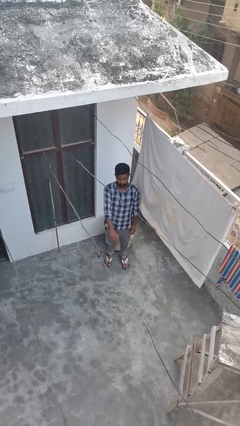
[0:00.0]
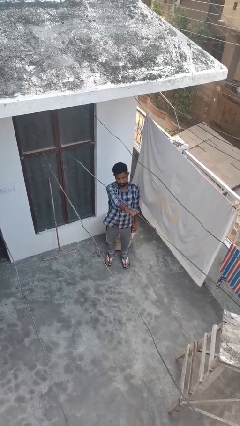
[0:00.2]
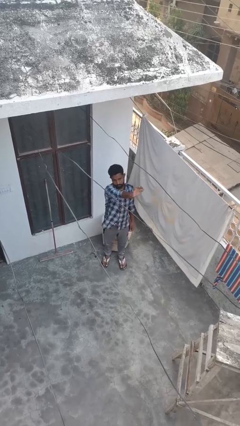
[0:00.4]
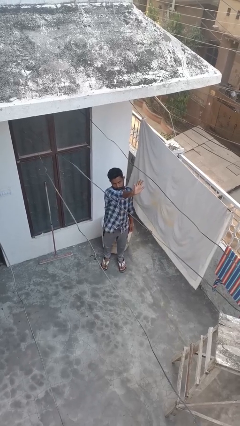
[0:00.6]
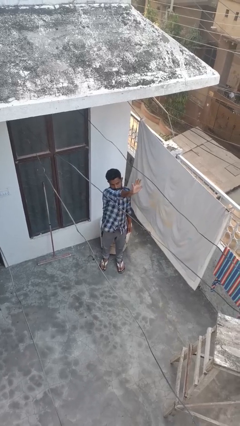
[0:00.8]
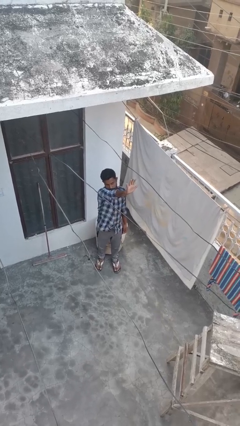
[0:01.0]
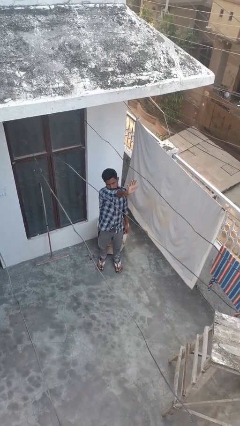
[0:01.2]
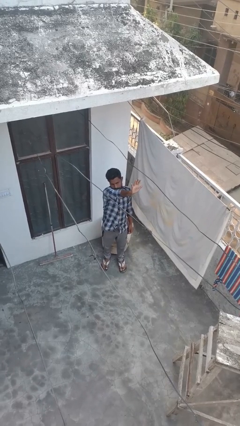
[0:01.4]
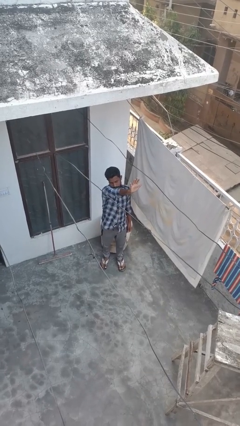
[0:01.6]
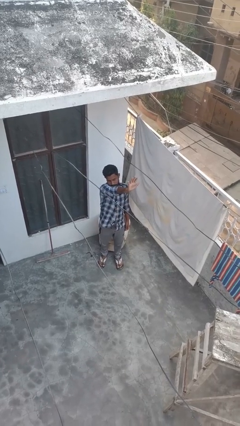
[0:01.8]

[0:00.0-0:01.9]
person gestures number five

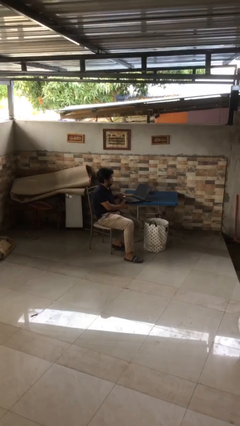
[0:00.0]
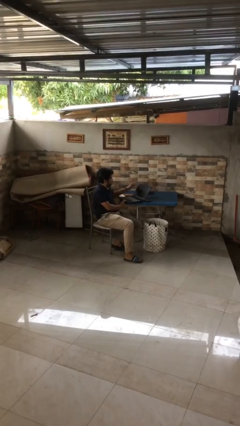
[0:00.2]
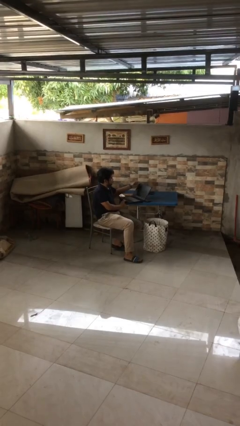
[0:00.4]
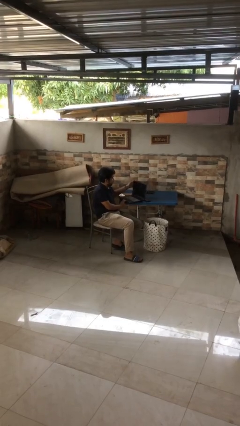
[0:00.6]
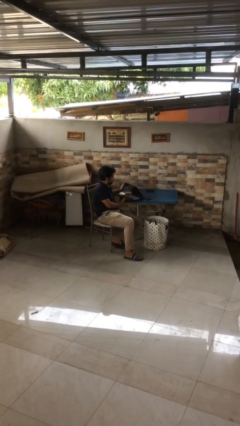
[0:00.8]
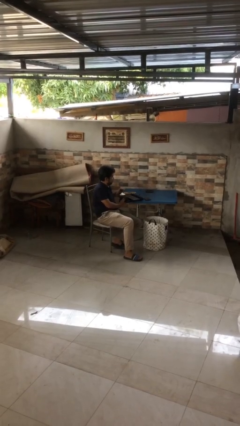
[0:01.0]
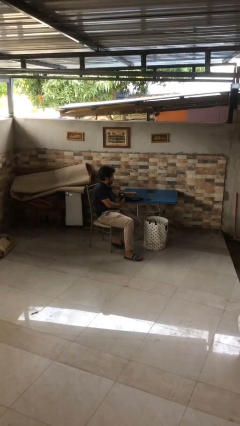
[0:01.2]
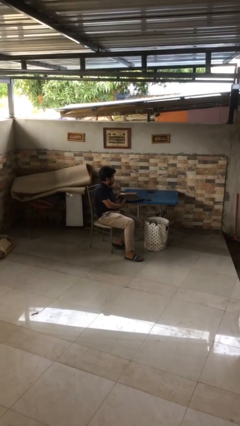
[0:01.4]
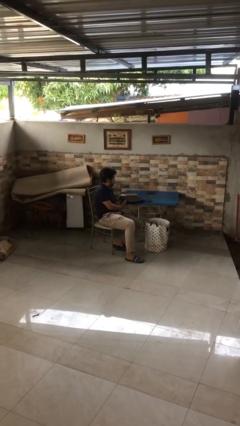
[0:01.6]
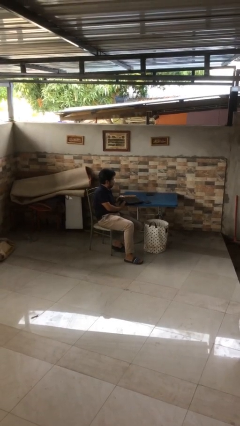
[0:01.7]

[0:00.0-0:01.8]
person closes laptop

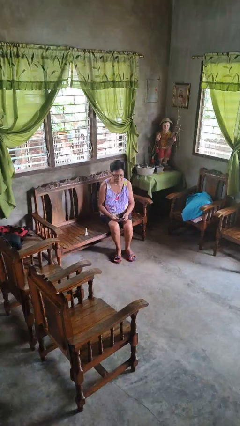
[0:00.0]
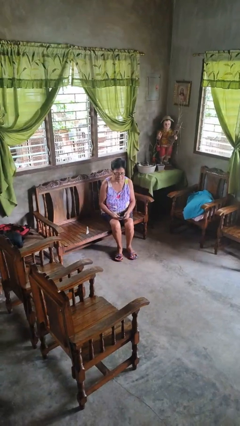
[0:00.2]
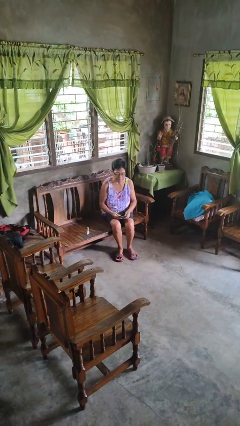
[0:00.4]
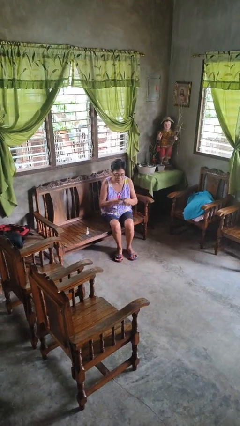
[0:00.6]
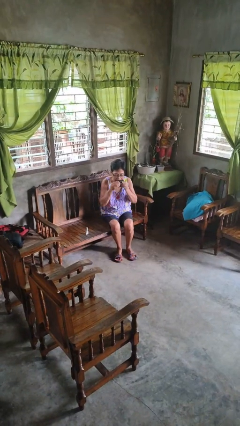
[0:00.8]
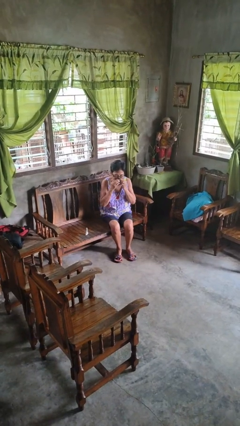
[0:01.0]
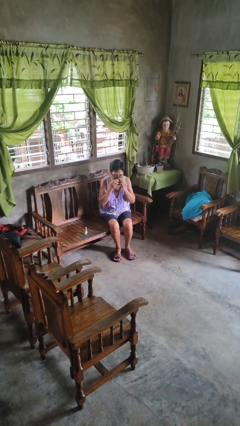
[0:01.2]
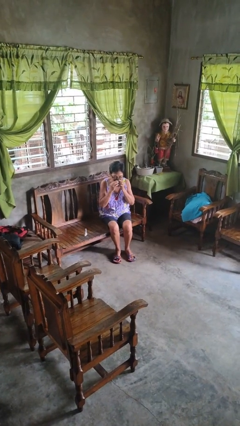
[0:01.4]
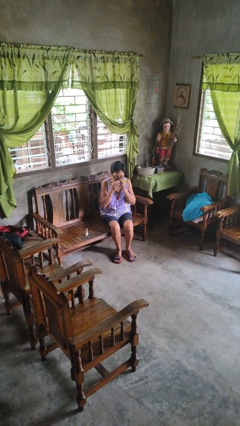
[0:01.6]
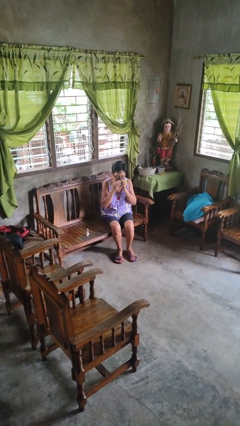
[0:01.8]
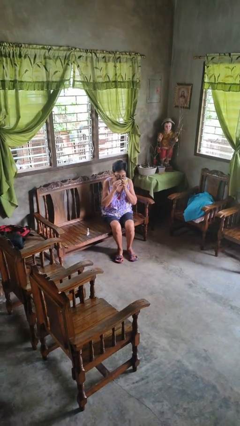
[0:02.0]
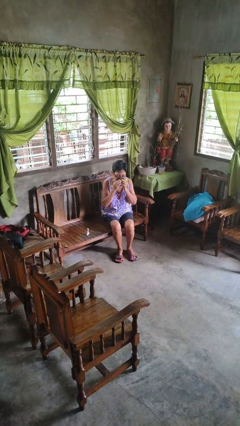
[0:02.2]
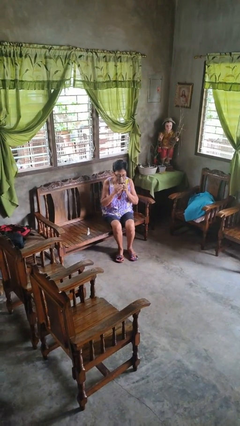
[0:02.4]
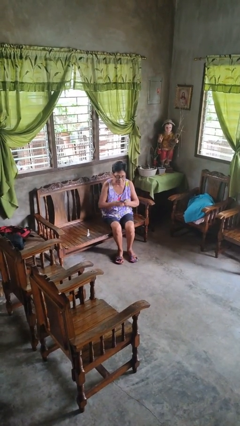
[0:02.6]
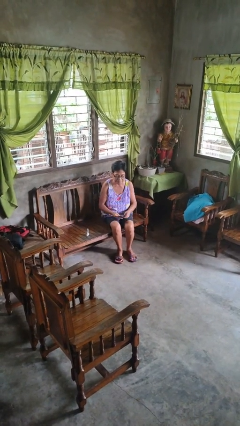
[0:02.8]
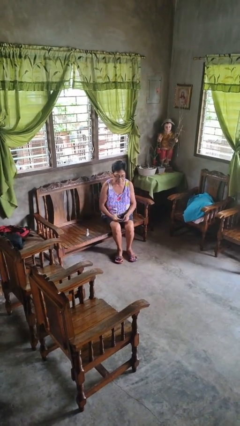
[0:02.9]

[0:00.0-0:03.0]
person blows nose

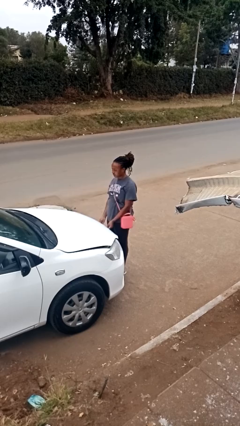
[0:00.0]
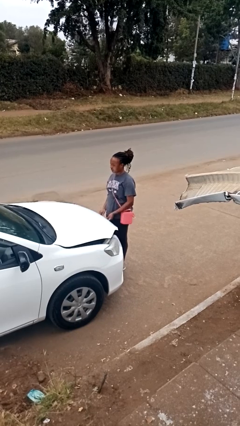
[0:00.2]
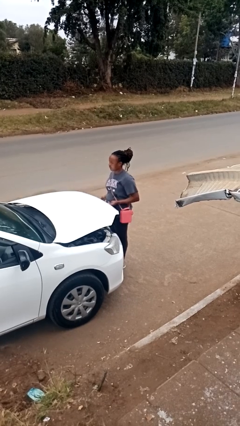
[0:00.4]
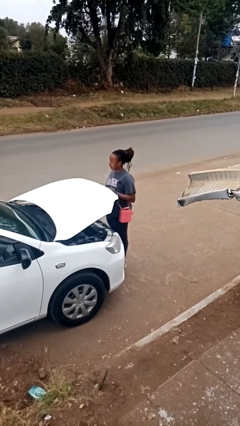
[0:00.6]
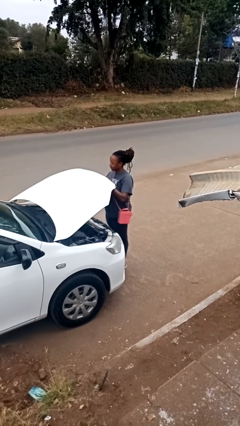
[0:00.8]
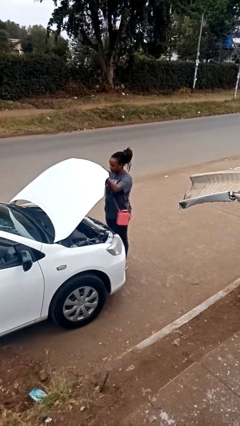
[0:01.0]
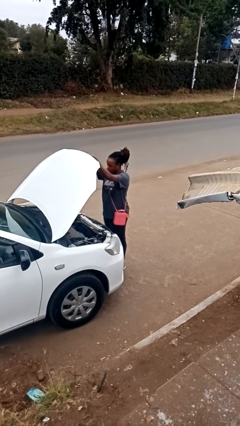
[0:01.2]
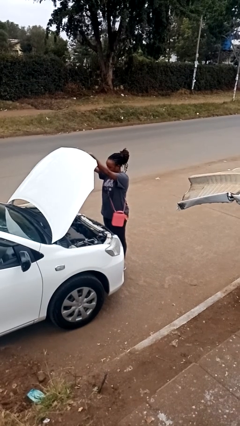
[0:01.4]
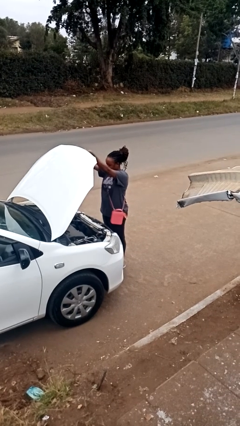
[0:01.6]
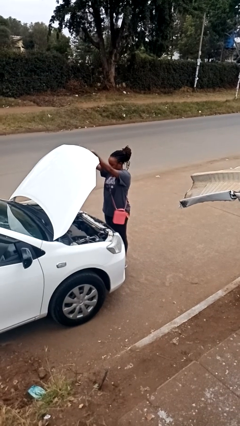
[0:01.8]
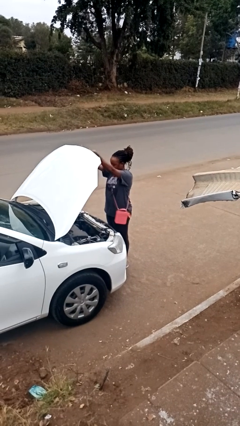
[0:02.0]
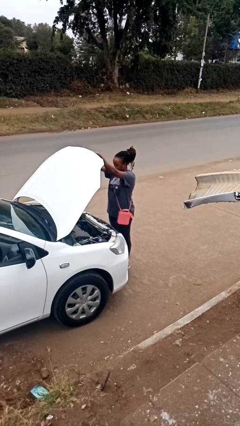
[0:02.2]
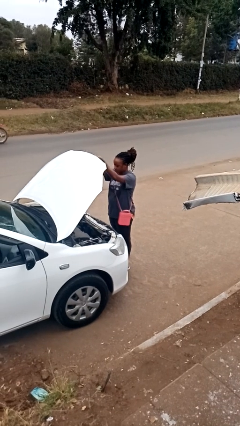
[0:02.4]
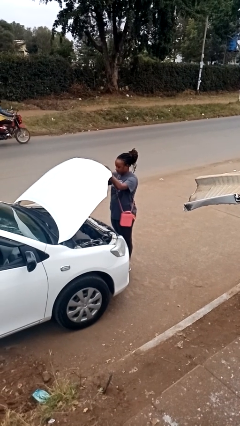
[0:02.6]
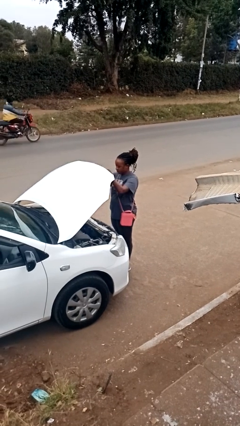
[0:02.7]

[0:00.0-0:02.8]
person opens car hood

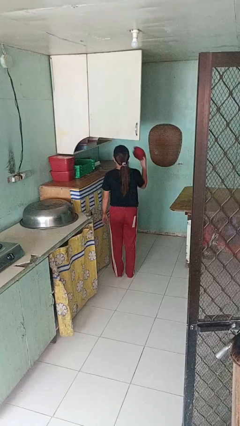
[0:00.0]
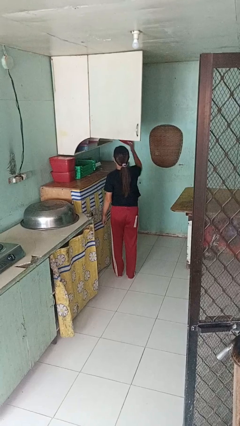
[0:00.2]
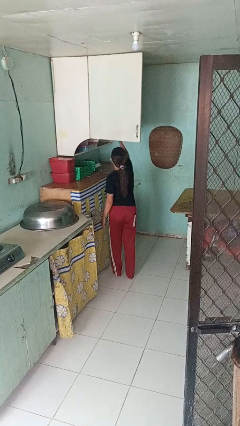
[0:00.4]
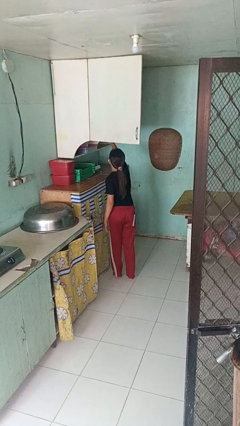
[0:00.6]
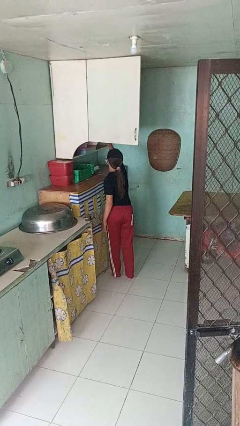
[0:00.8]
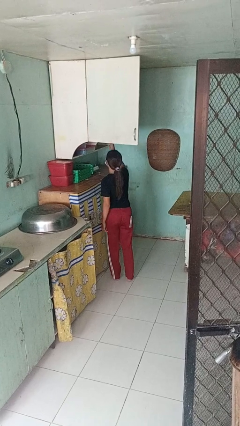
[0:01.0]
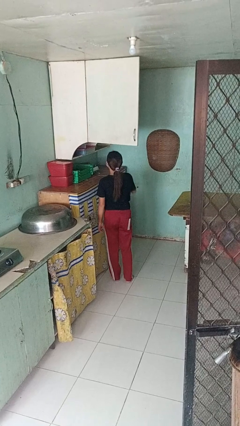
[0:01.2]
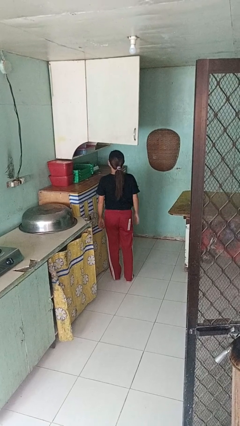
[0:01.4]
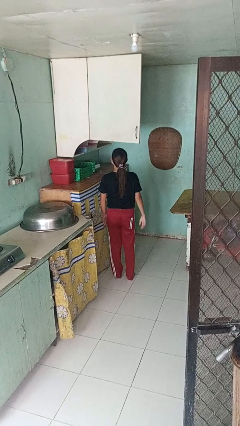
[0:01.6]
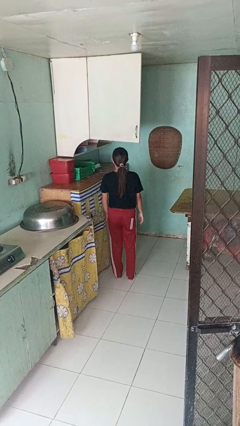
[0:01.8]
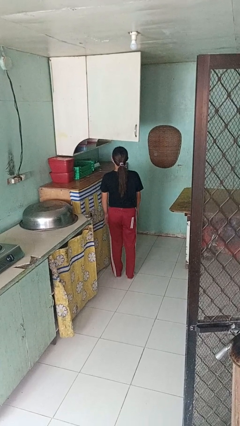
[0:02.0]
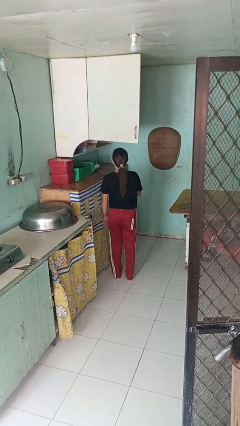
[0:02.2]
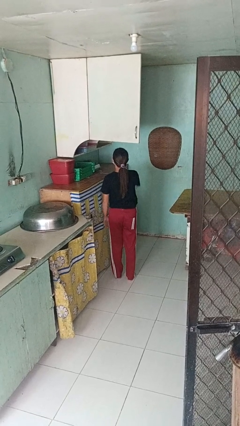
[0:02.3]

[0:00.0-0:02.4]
person puts object in cabinet

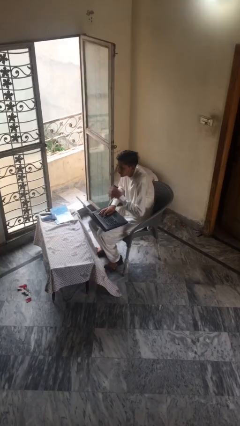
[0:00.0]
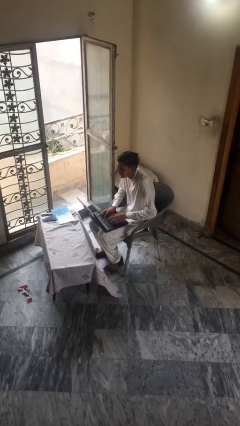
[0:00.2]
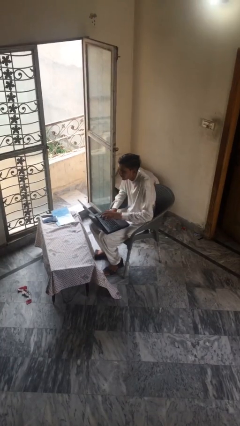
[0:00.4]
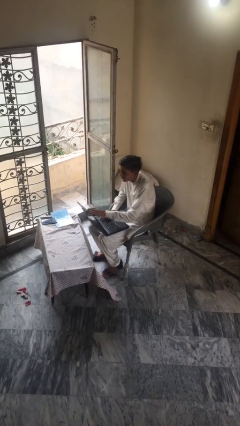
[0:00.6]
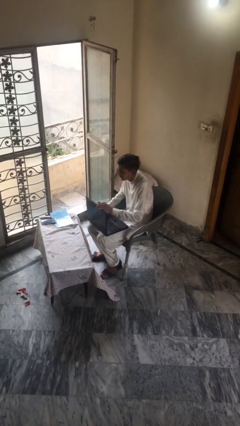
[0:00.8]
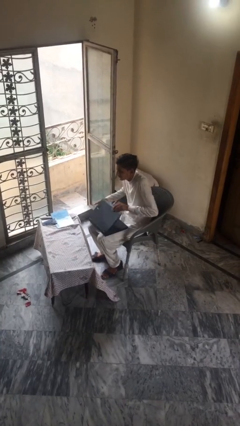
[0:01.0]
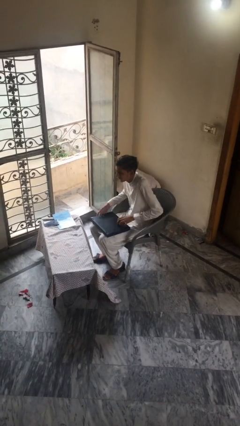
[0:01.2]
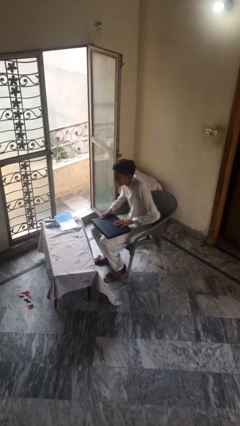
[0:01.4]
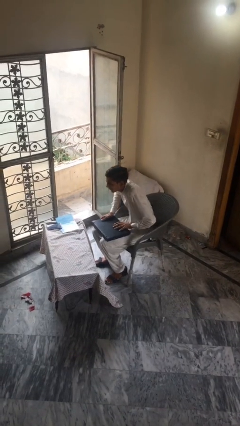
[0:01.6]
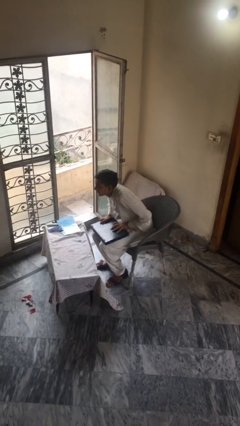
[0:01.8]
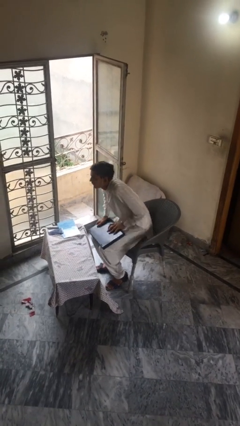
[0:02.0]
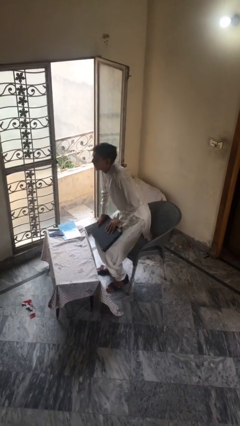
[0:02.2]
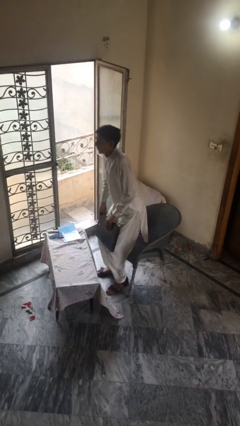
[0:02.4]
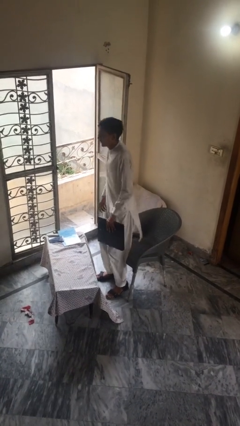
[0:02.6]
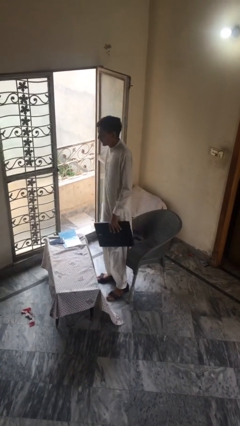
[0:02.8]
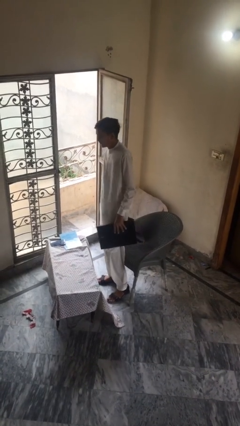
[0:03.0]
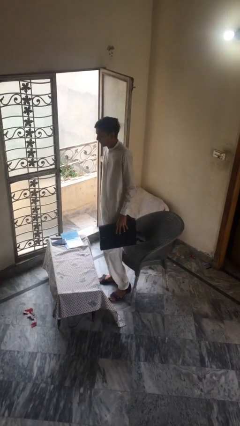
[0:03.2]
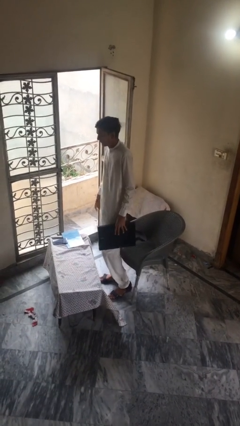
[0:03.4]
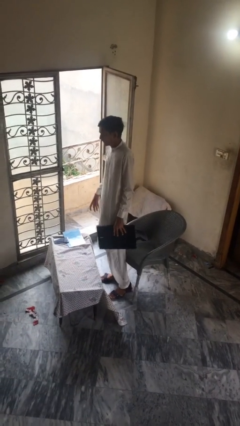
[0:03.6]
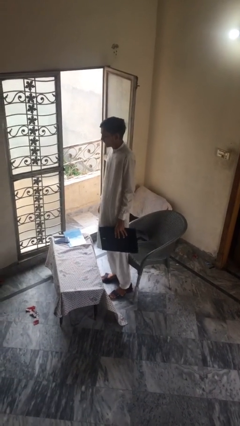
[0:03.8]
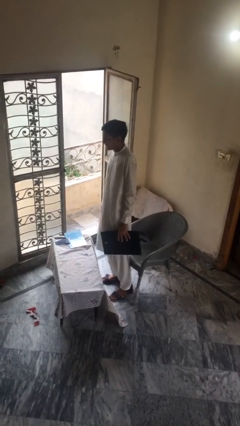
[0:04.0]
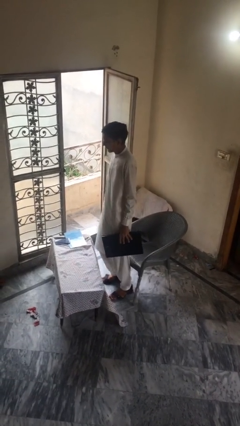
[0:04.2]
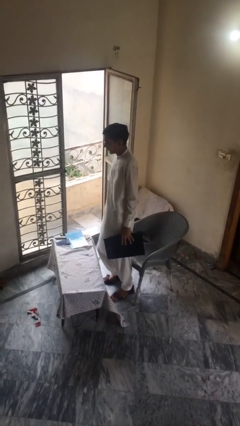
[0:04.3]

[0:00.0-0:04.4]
person stands up

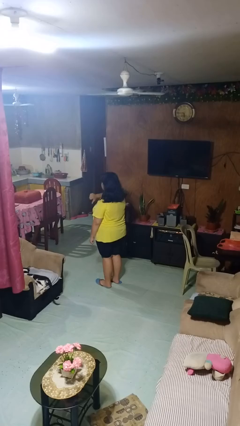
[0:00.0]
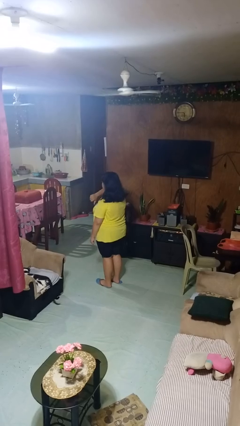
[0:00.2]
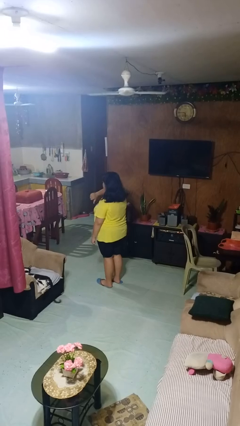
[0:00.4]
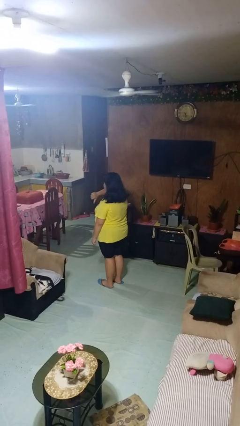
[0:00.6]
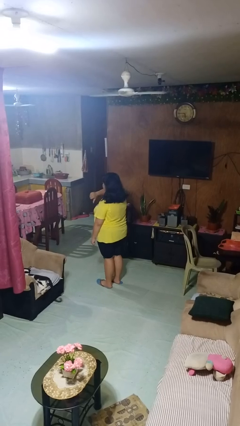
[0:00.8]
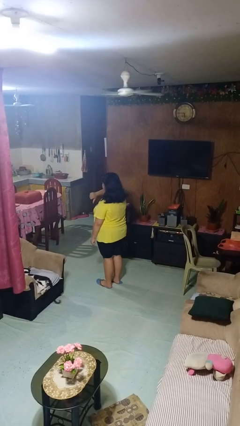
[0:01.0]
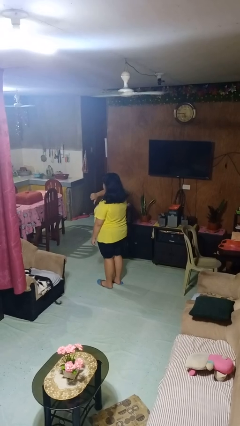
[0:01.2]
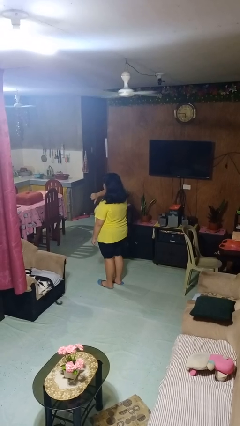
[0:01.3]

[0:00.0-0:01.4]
person gestures thumbs down
